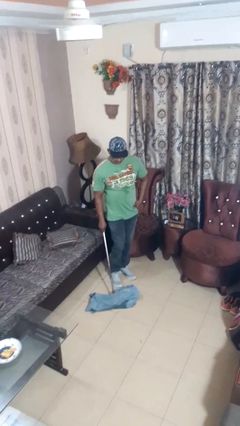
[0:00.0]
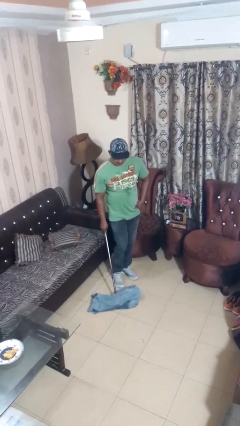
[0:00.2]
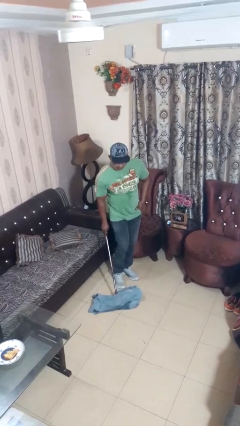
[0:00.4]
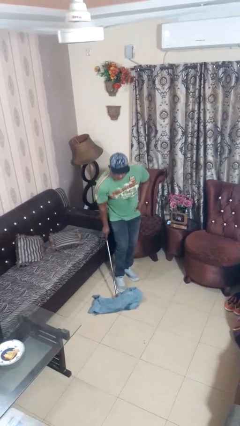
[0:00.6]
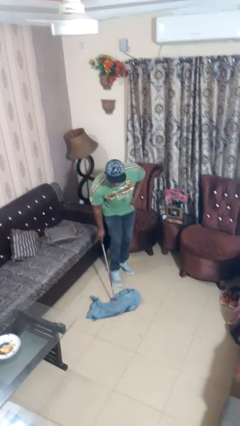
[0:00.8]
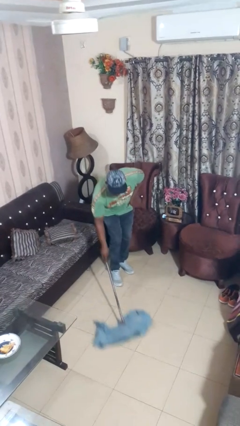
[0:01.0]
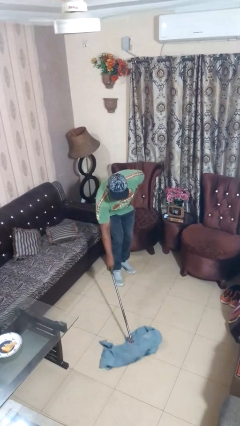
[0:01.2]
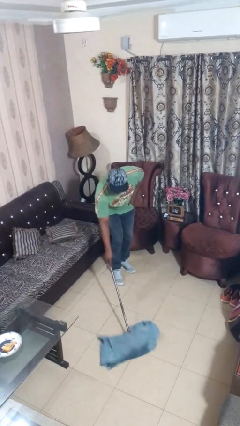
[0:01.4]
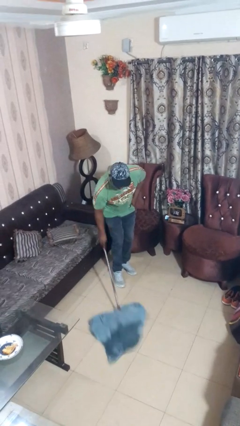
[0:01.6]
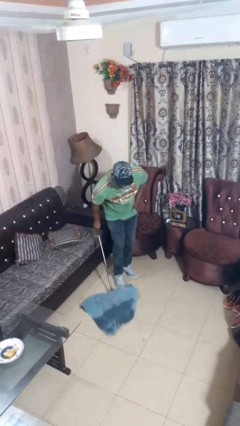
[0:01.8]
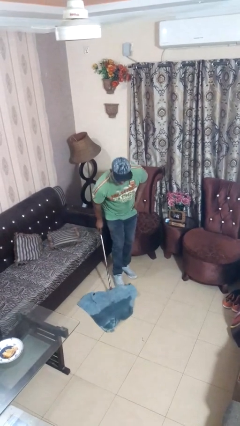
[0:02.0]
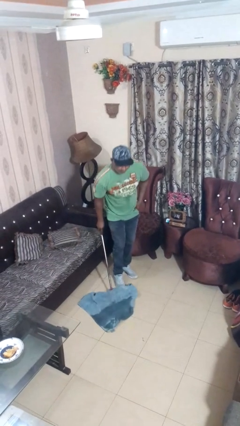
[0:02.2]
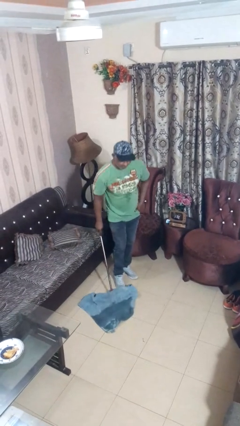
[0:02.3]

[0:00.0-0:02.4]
person mops

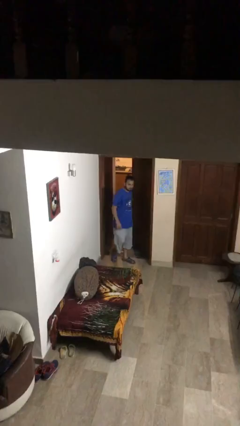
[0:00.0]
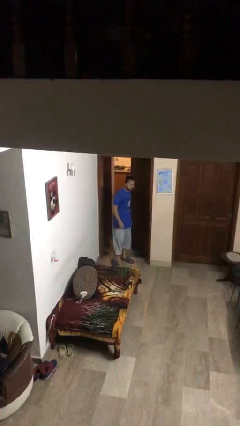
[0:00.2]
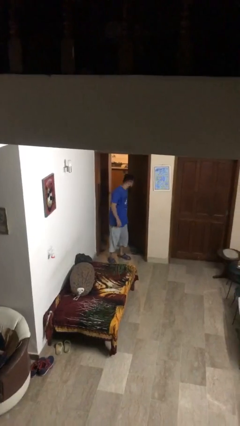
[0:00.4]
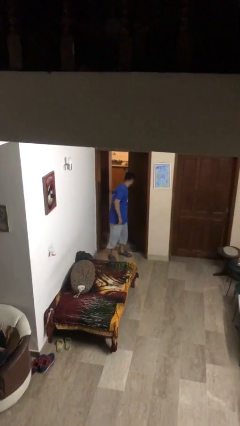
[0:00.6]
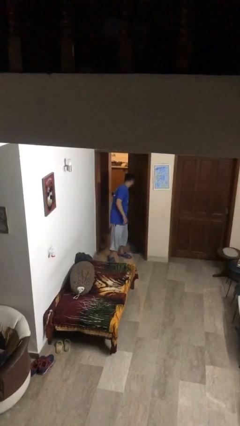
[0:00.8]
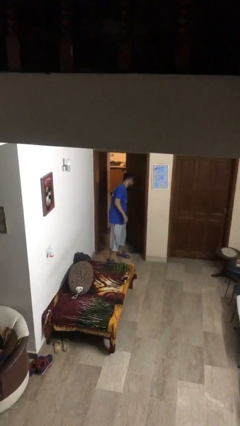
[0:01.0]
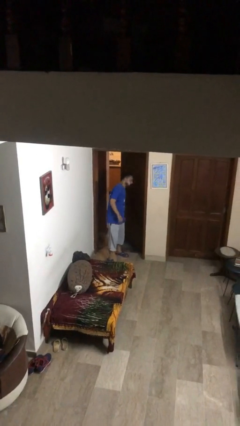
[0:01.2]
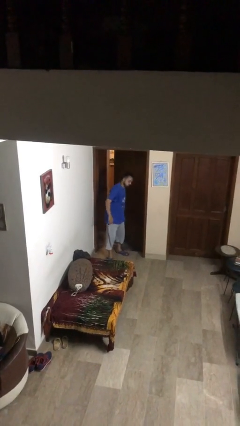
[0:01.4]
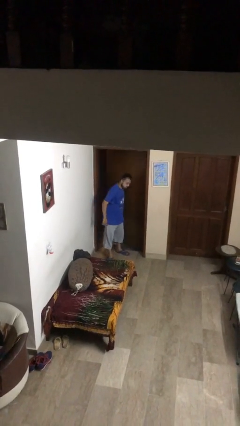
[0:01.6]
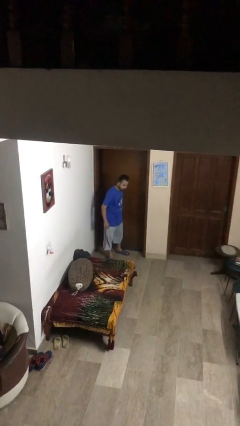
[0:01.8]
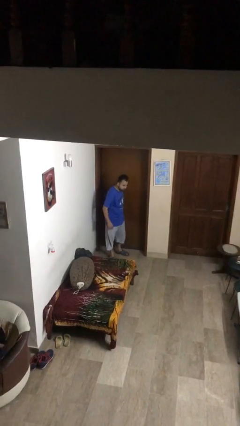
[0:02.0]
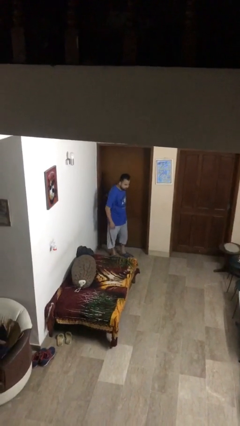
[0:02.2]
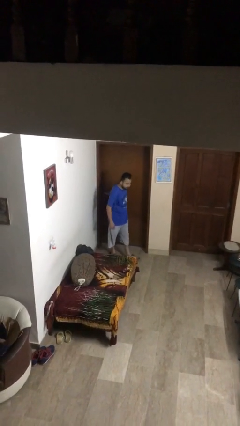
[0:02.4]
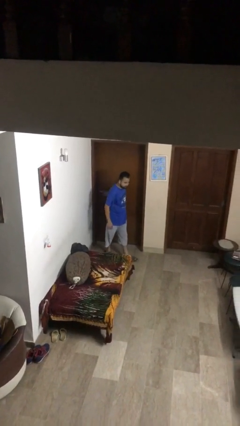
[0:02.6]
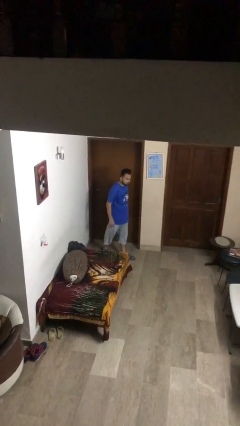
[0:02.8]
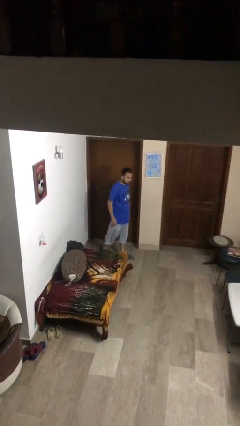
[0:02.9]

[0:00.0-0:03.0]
person closes facility door

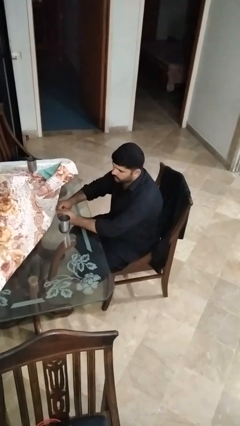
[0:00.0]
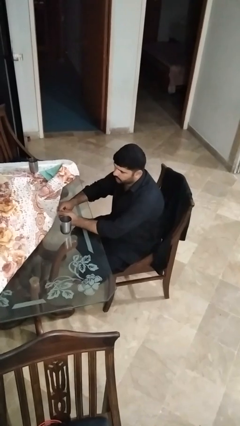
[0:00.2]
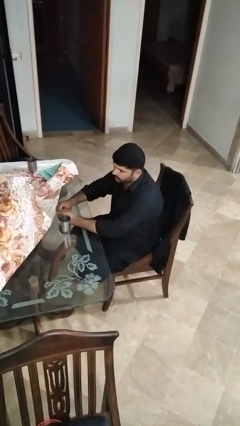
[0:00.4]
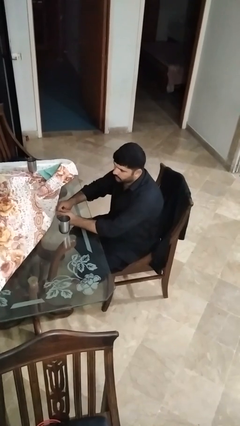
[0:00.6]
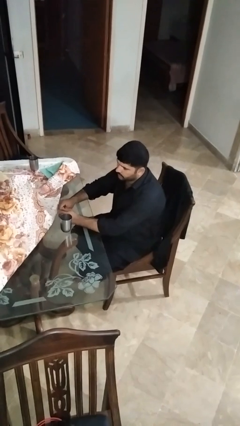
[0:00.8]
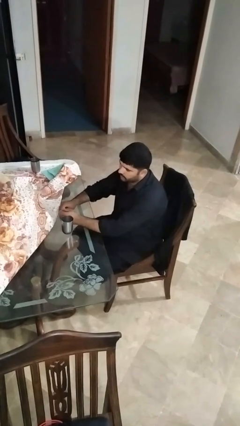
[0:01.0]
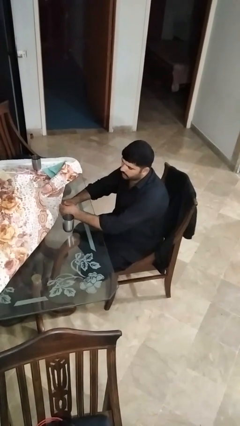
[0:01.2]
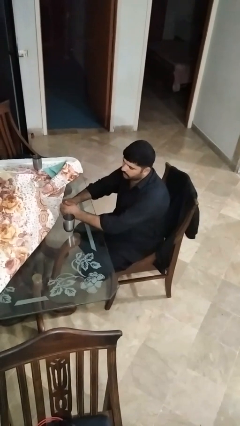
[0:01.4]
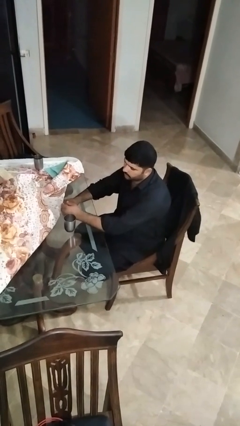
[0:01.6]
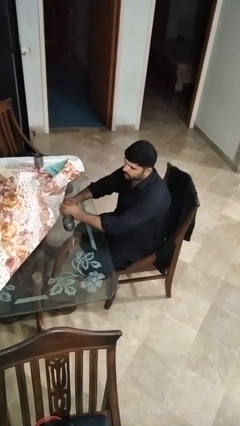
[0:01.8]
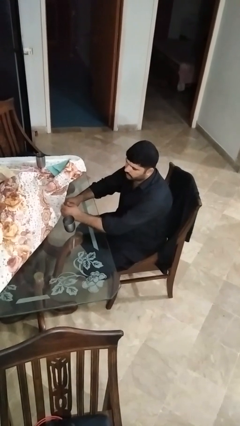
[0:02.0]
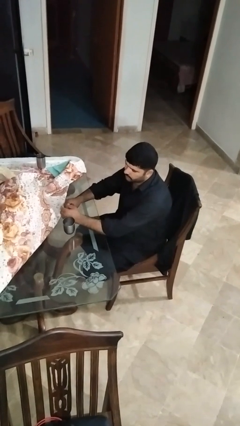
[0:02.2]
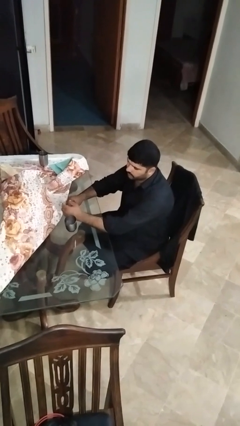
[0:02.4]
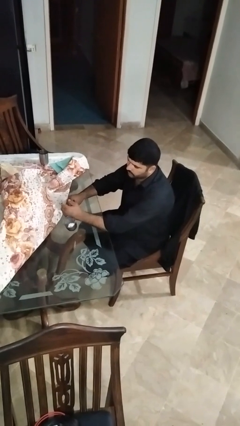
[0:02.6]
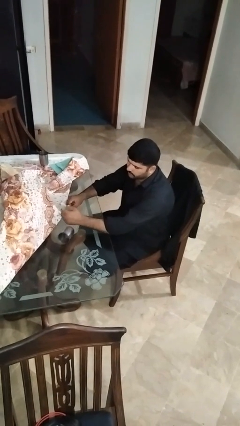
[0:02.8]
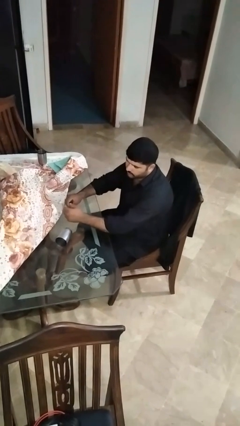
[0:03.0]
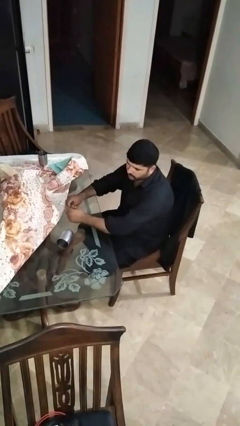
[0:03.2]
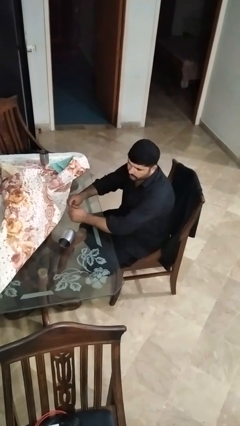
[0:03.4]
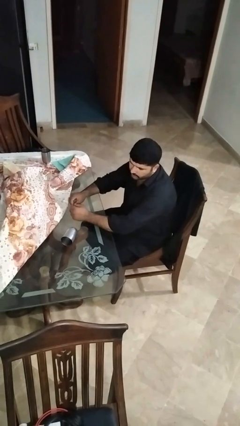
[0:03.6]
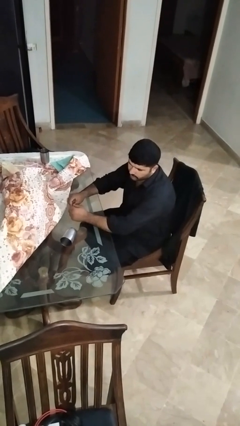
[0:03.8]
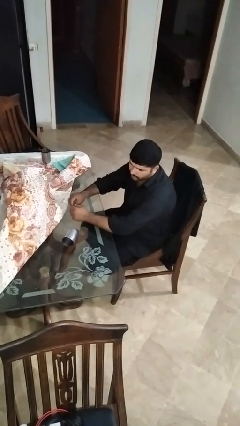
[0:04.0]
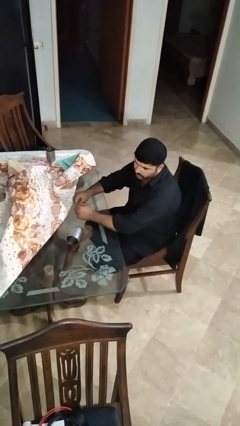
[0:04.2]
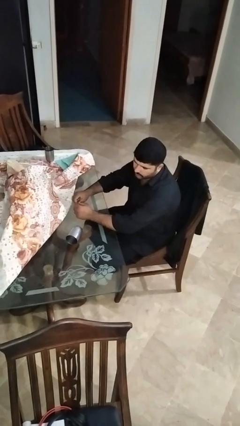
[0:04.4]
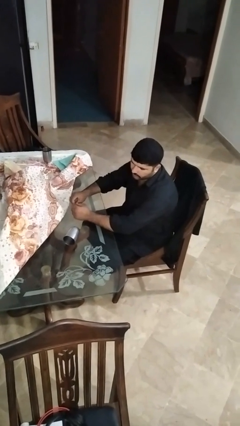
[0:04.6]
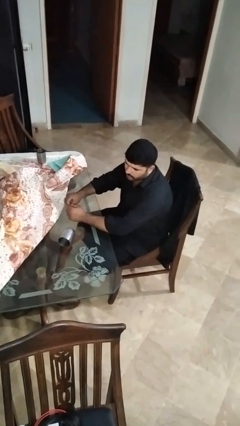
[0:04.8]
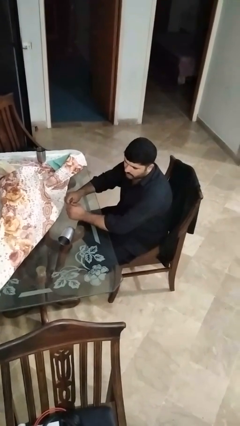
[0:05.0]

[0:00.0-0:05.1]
person spills on table

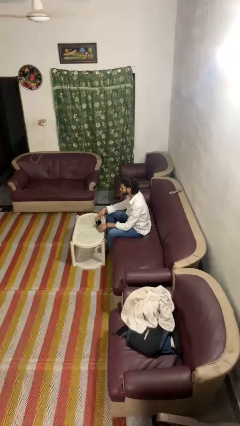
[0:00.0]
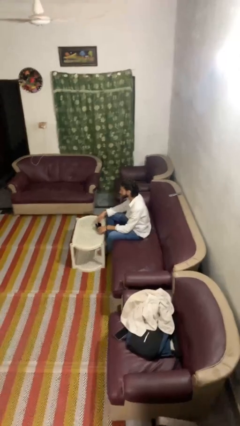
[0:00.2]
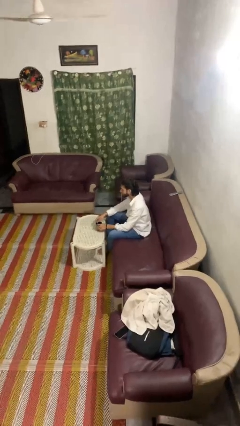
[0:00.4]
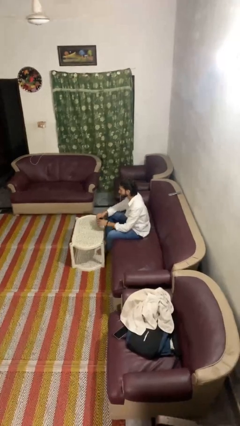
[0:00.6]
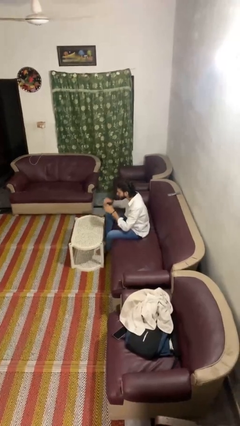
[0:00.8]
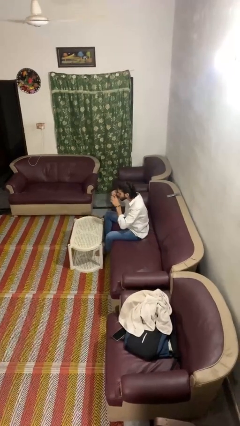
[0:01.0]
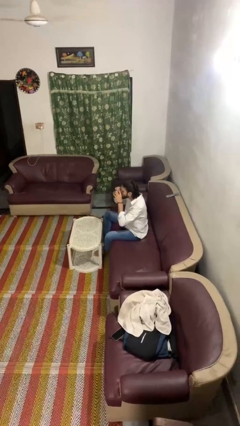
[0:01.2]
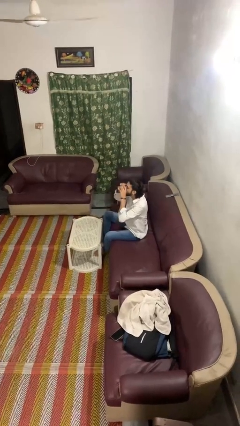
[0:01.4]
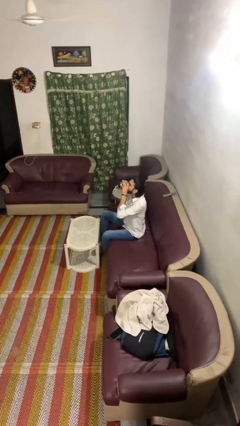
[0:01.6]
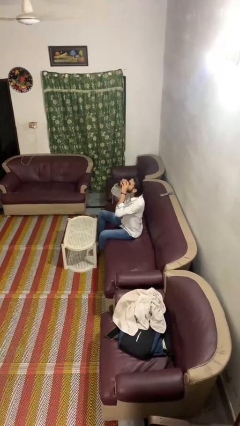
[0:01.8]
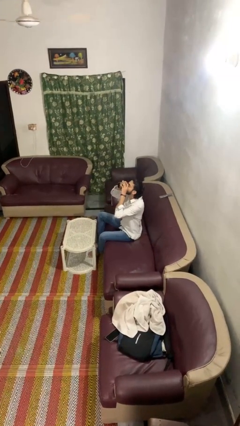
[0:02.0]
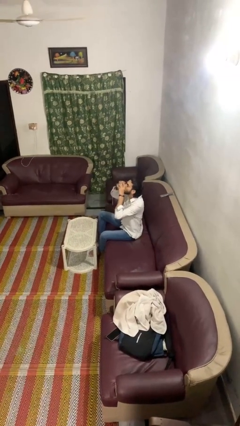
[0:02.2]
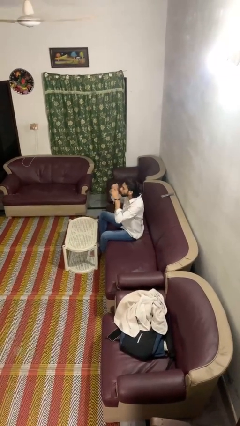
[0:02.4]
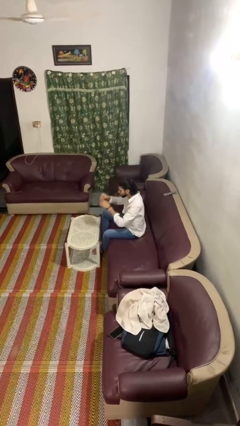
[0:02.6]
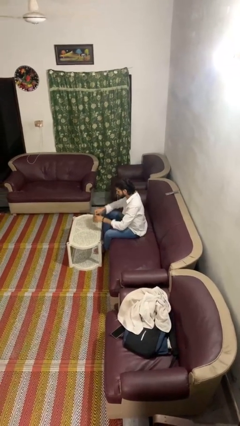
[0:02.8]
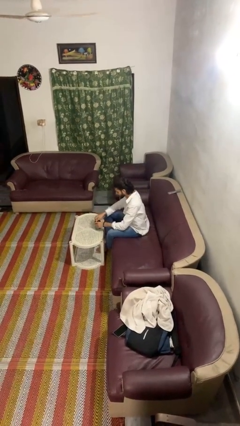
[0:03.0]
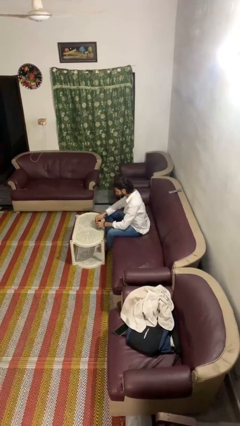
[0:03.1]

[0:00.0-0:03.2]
person drinks from mug

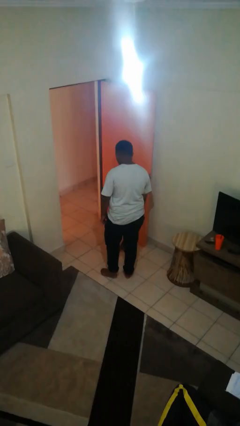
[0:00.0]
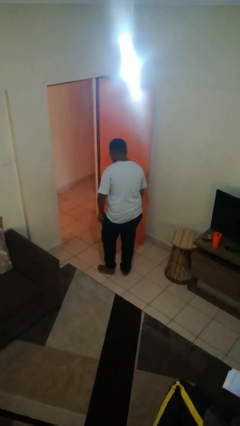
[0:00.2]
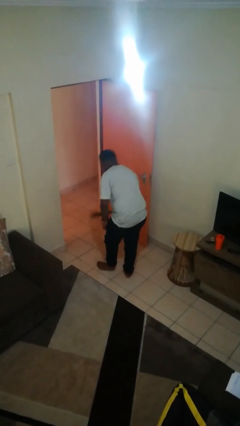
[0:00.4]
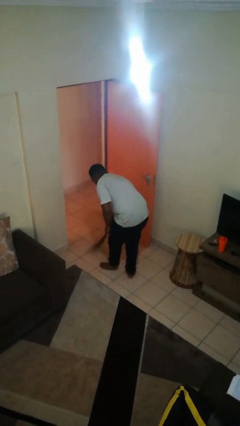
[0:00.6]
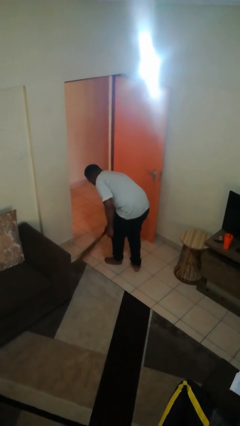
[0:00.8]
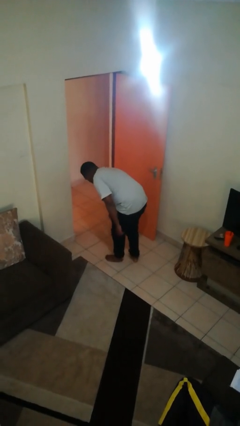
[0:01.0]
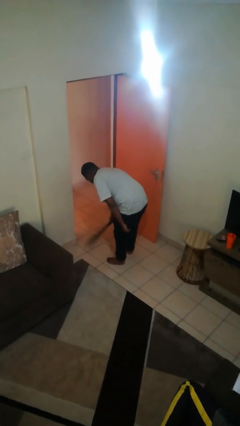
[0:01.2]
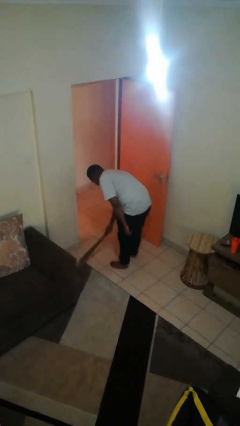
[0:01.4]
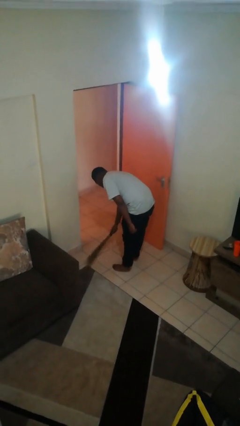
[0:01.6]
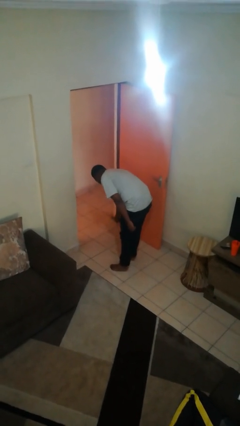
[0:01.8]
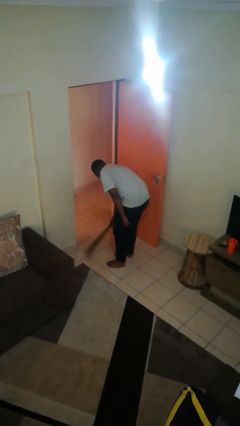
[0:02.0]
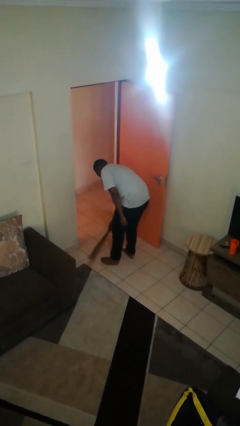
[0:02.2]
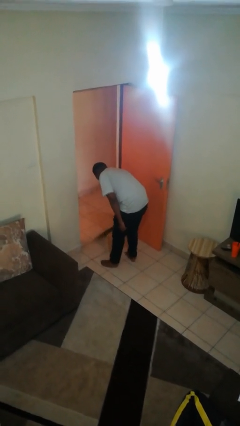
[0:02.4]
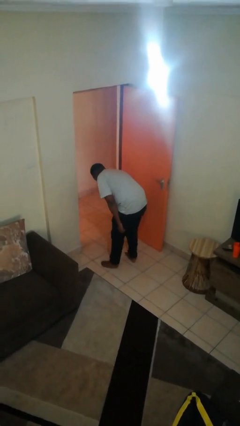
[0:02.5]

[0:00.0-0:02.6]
person sweeps floor

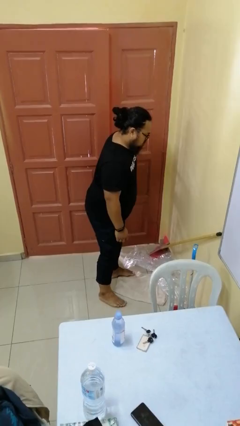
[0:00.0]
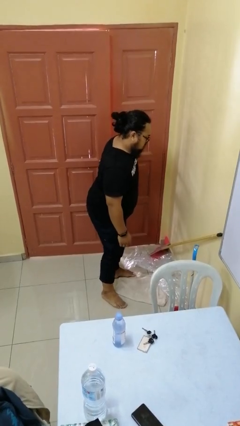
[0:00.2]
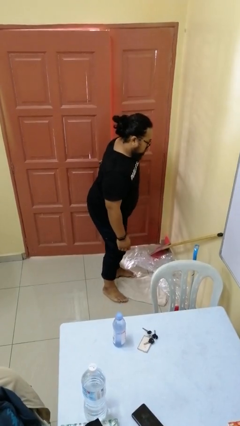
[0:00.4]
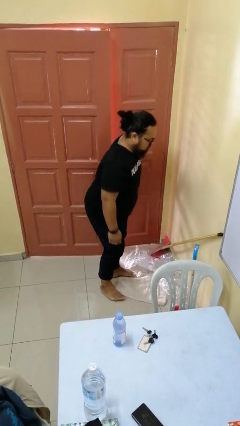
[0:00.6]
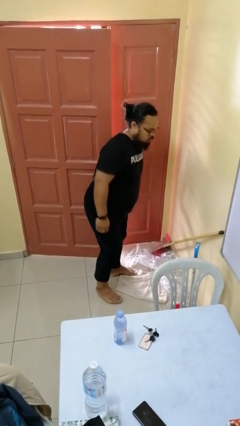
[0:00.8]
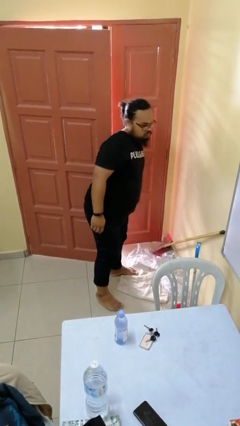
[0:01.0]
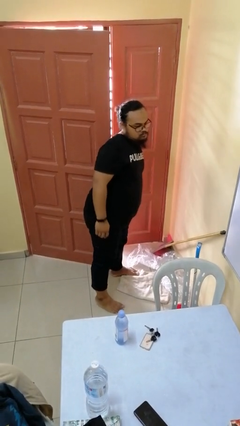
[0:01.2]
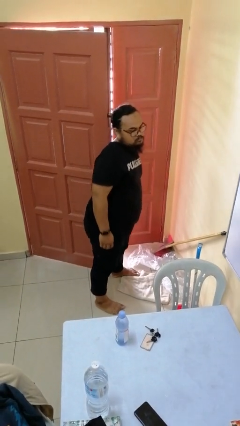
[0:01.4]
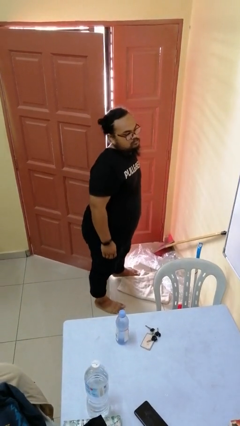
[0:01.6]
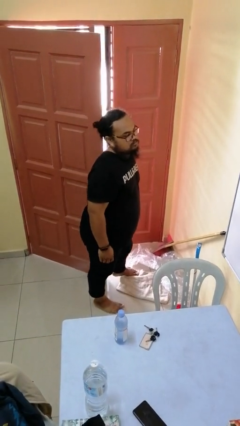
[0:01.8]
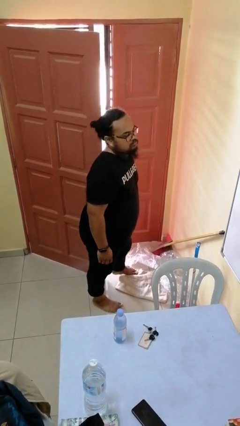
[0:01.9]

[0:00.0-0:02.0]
person opens facility door
